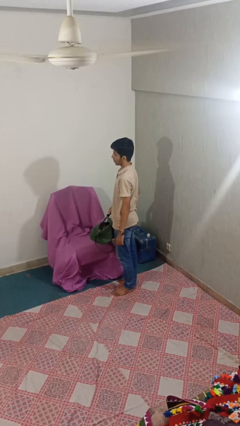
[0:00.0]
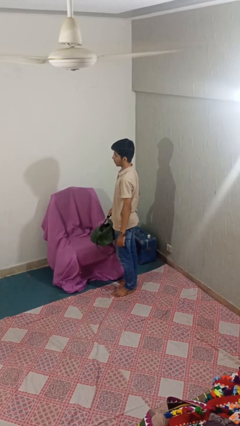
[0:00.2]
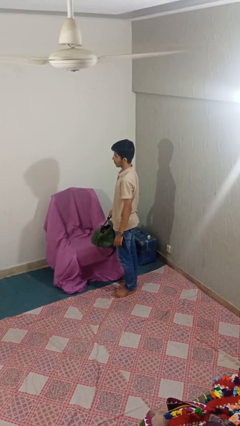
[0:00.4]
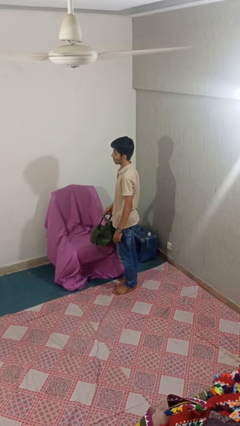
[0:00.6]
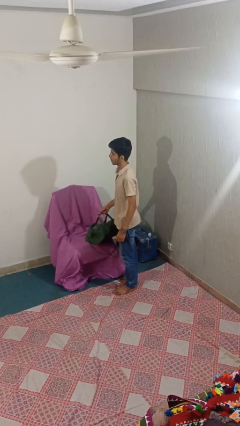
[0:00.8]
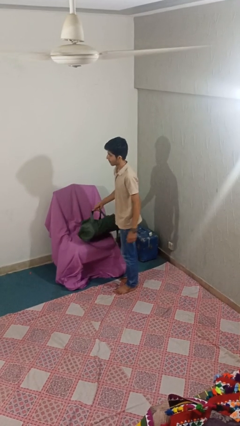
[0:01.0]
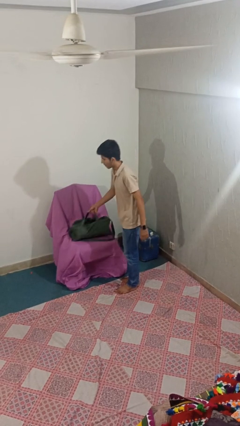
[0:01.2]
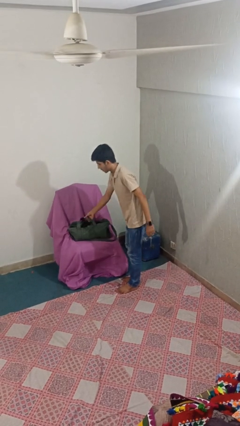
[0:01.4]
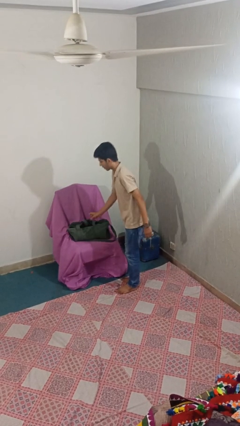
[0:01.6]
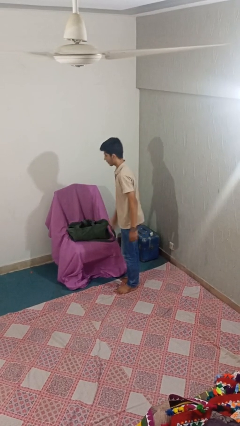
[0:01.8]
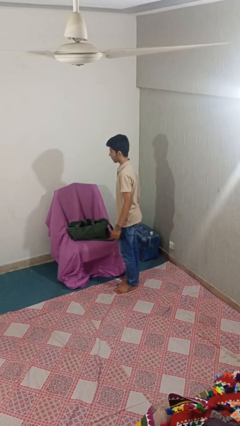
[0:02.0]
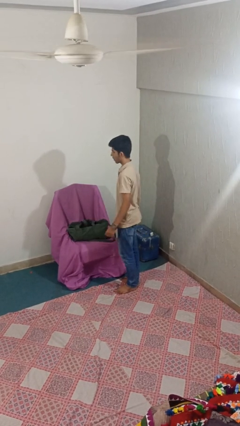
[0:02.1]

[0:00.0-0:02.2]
person puts down object on couch

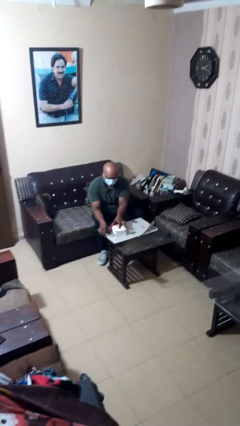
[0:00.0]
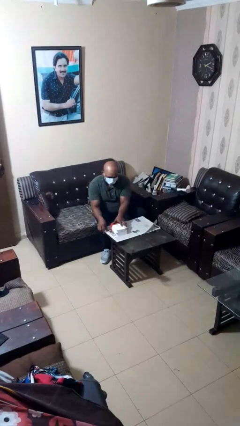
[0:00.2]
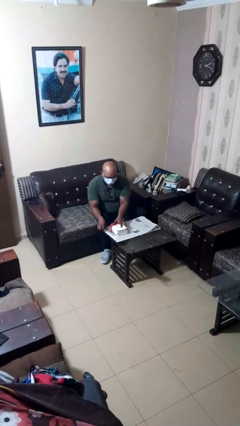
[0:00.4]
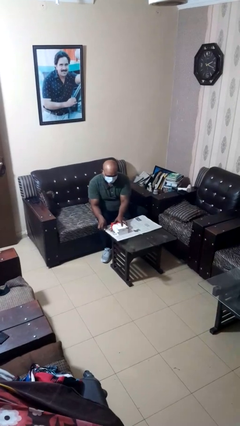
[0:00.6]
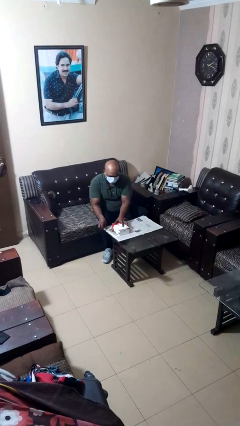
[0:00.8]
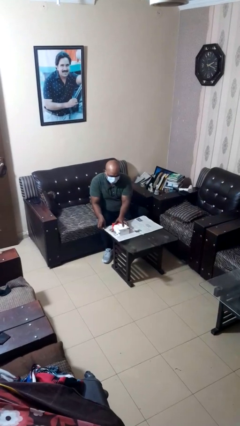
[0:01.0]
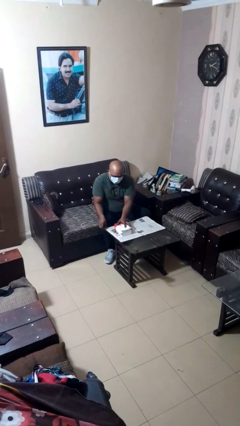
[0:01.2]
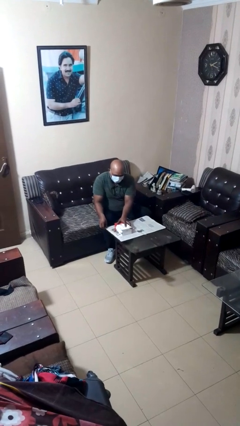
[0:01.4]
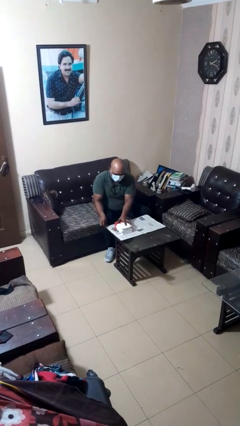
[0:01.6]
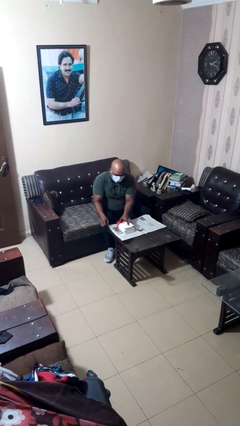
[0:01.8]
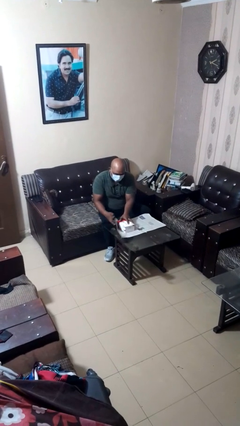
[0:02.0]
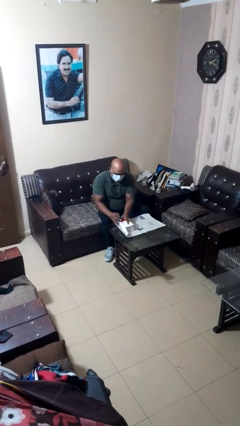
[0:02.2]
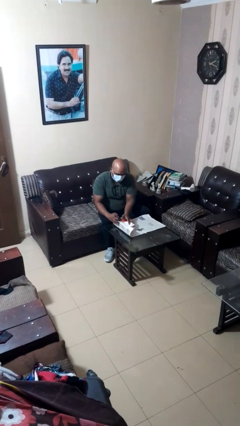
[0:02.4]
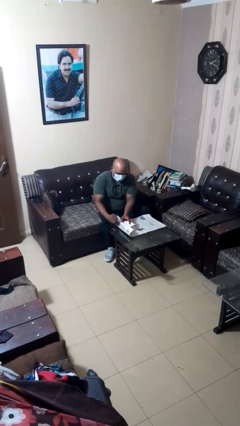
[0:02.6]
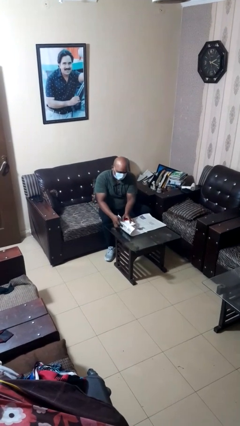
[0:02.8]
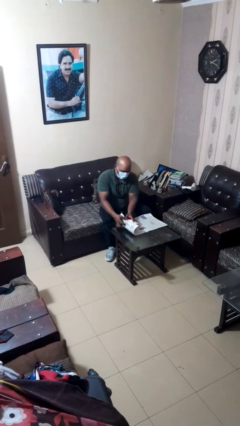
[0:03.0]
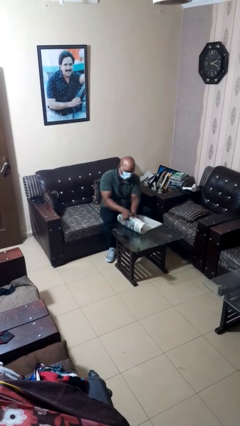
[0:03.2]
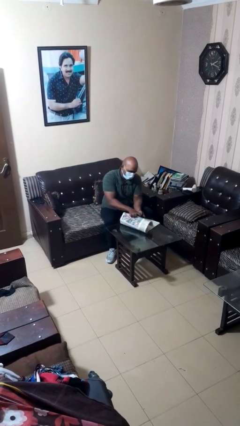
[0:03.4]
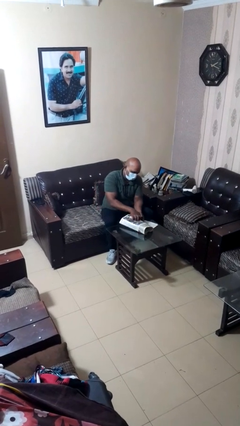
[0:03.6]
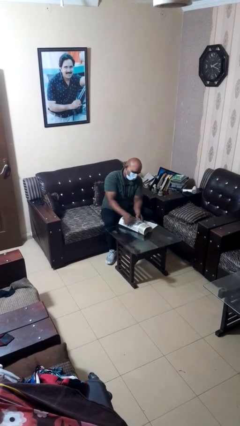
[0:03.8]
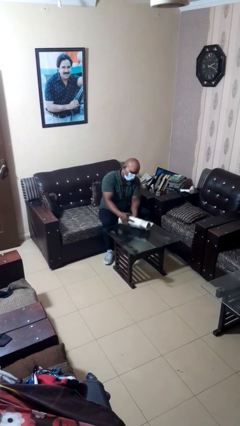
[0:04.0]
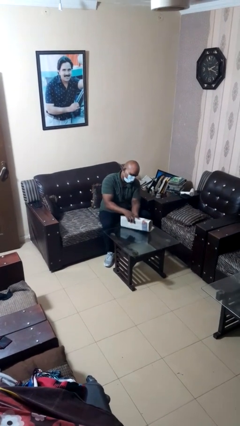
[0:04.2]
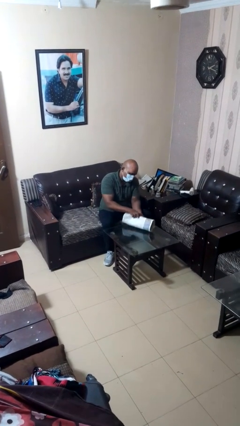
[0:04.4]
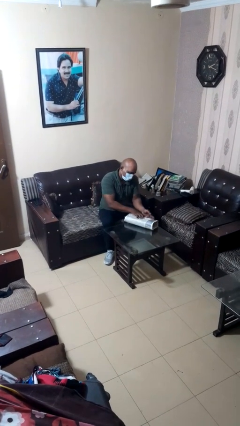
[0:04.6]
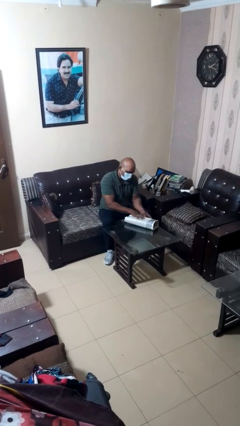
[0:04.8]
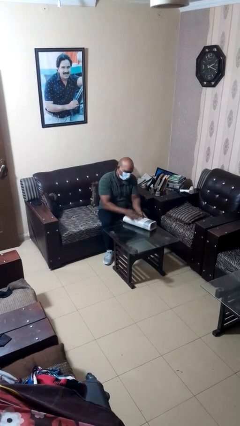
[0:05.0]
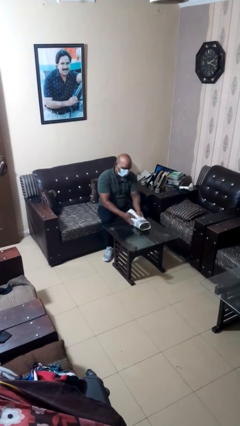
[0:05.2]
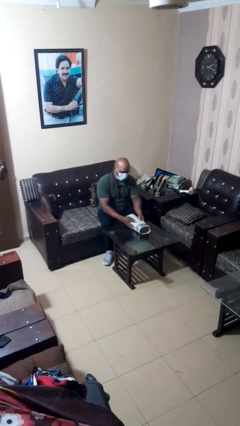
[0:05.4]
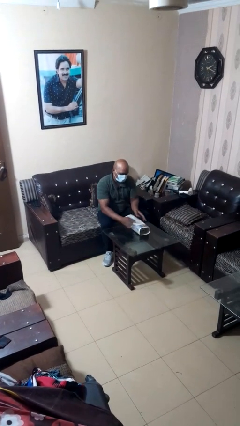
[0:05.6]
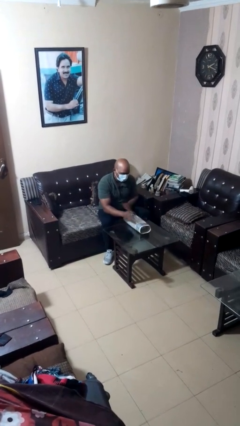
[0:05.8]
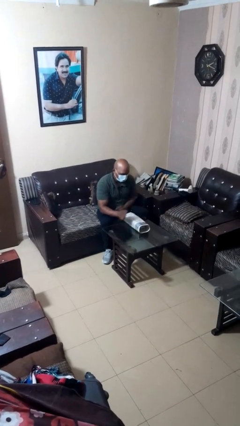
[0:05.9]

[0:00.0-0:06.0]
person wraps box

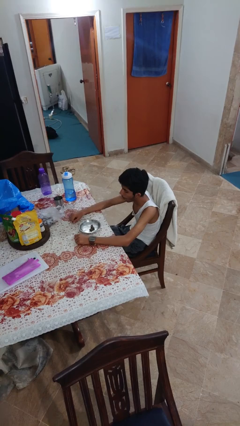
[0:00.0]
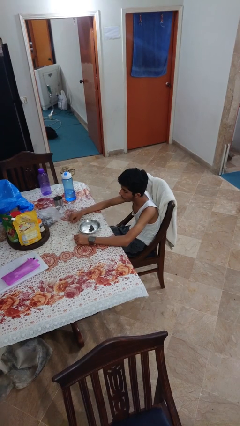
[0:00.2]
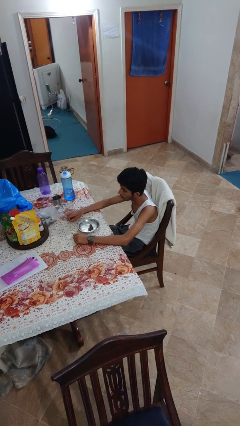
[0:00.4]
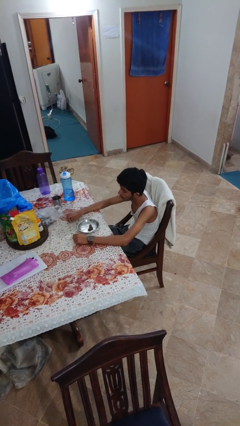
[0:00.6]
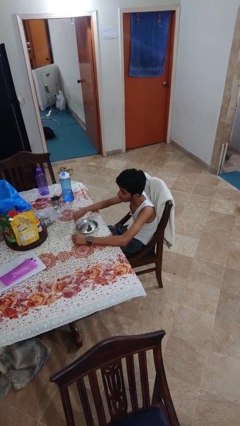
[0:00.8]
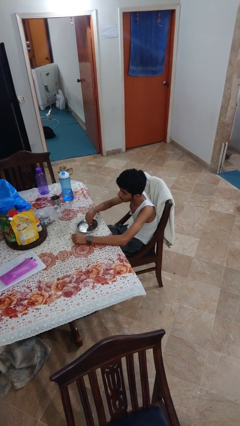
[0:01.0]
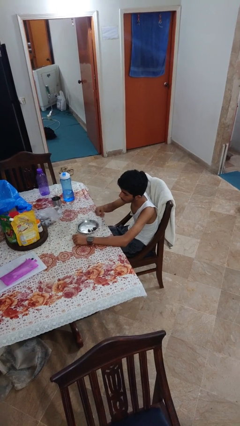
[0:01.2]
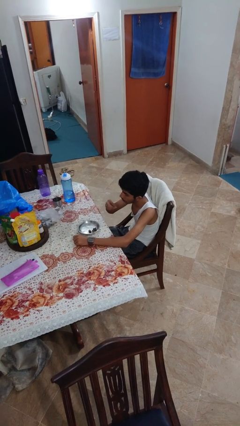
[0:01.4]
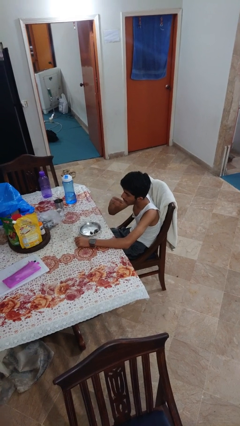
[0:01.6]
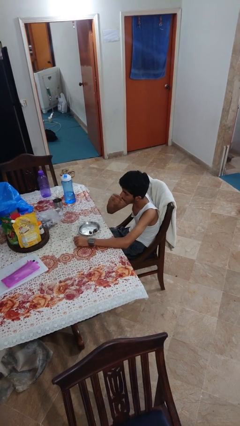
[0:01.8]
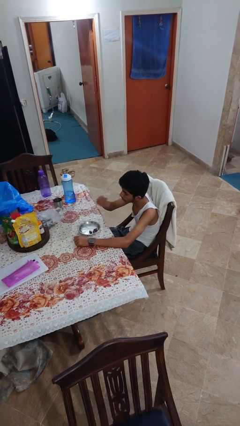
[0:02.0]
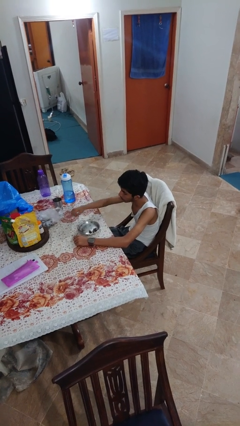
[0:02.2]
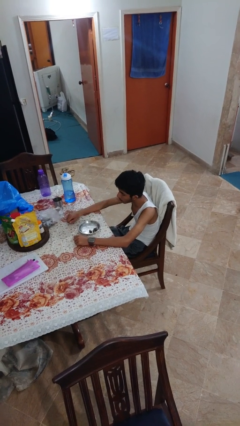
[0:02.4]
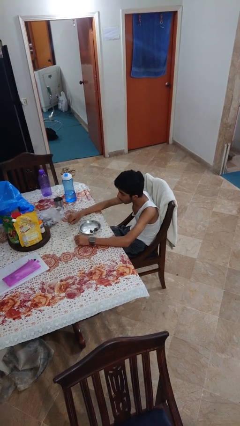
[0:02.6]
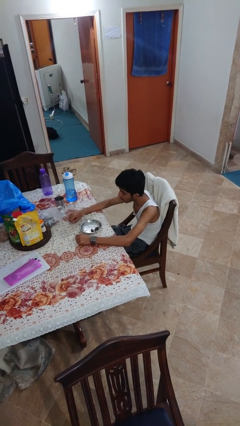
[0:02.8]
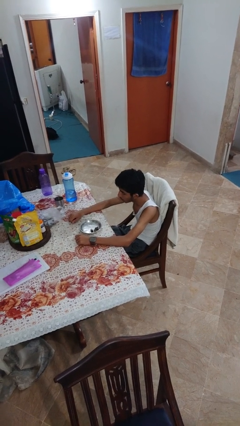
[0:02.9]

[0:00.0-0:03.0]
person eats with hands

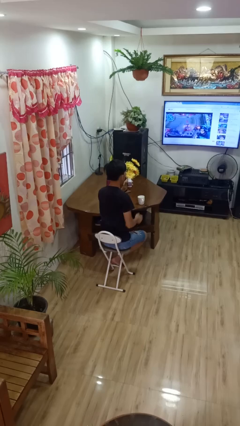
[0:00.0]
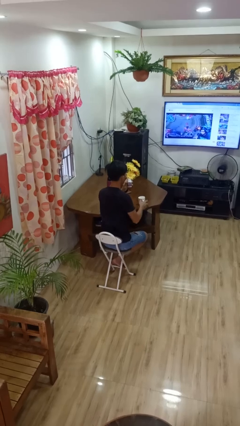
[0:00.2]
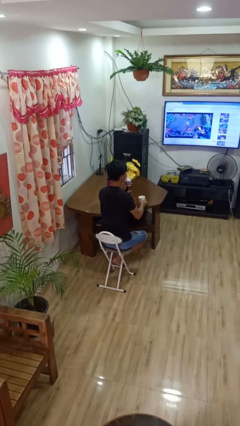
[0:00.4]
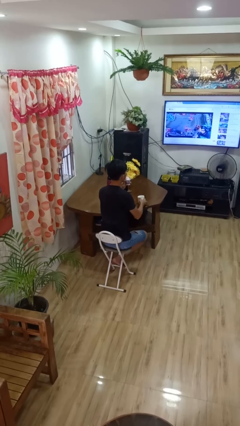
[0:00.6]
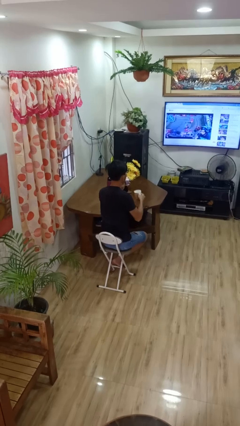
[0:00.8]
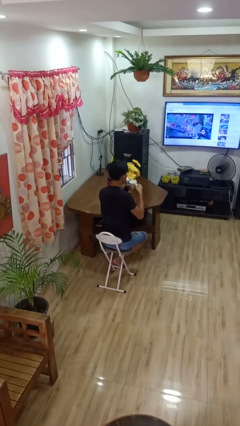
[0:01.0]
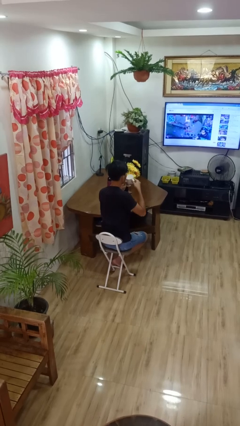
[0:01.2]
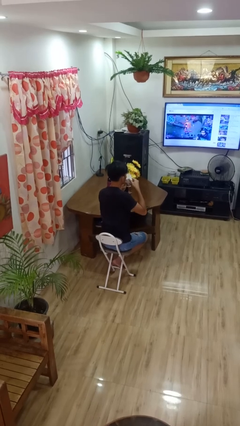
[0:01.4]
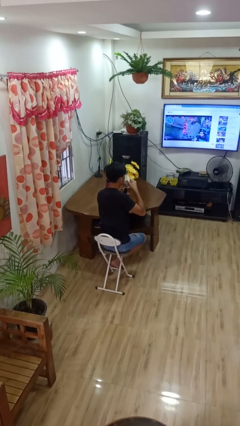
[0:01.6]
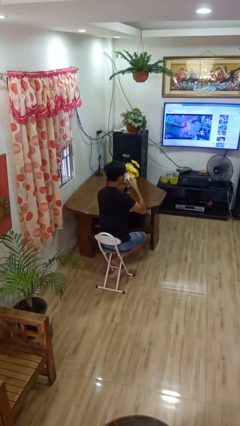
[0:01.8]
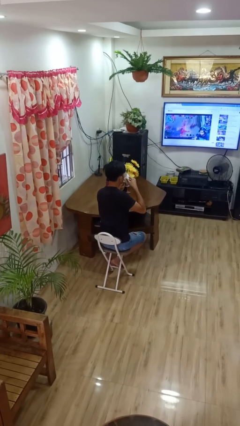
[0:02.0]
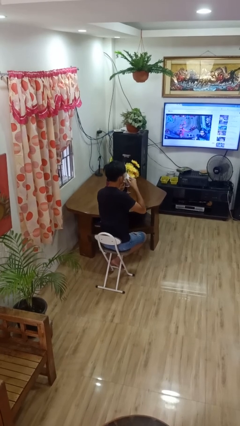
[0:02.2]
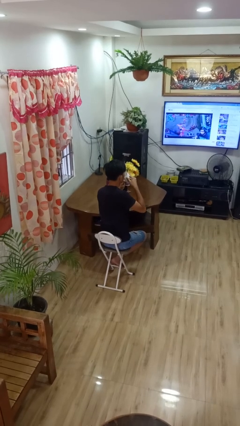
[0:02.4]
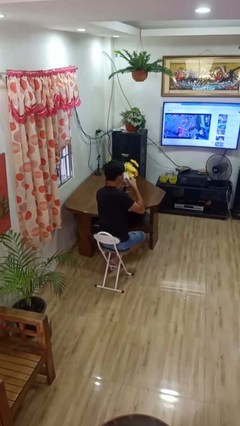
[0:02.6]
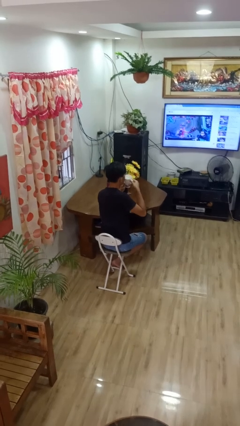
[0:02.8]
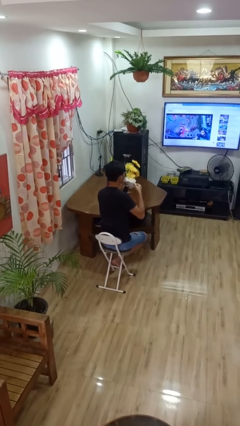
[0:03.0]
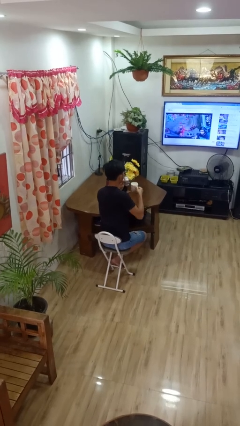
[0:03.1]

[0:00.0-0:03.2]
person drinks from cup

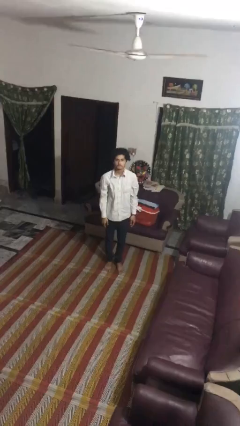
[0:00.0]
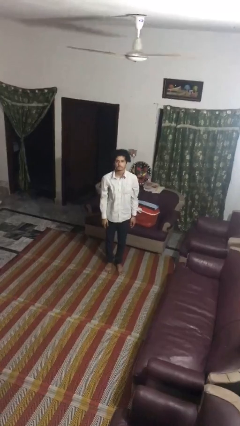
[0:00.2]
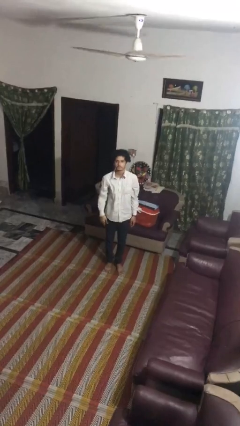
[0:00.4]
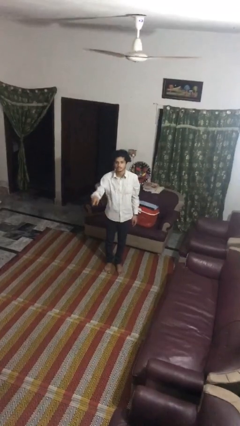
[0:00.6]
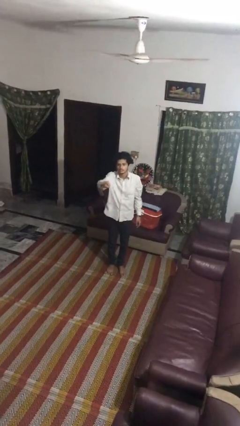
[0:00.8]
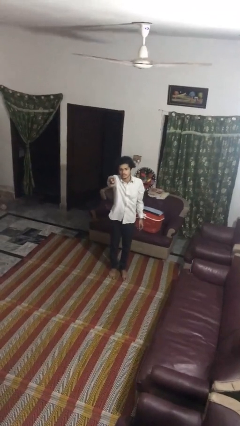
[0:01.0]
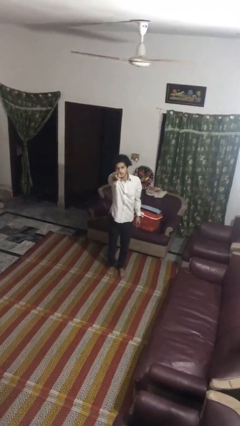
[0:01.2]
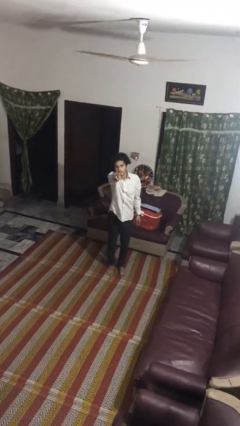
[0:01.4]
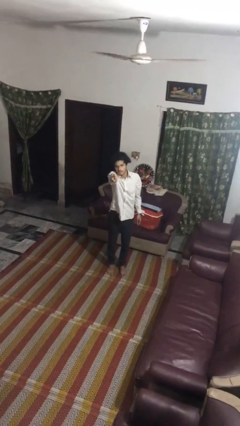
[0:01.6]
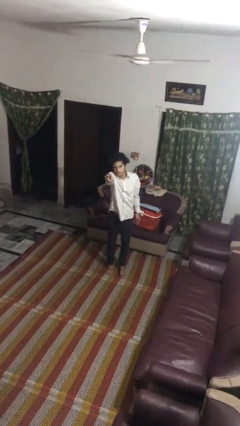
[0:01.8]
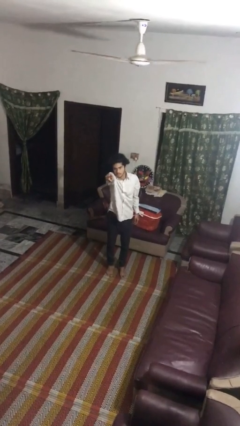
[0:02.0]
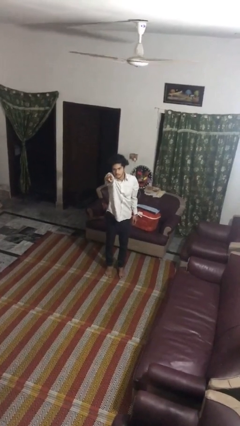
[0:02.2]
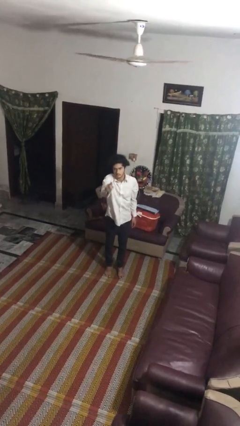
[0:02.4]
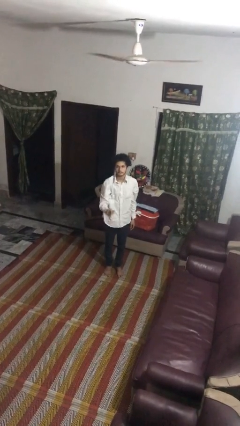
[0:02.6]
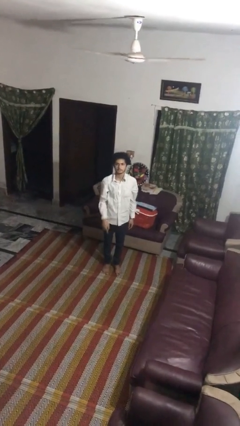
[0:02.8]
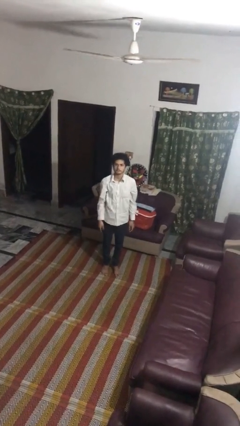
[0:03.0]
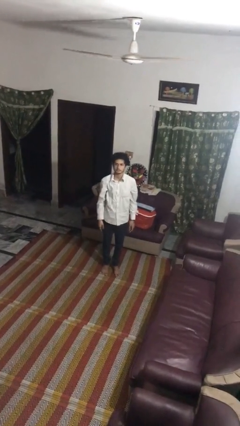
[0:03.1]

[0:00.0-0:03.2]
person points at person
